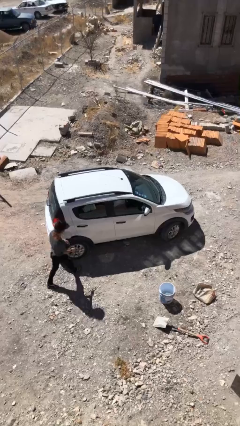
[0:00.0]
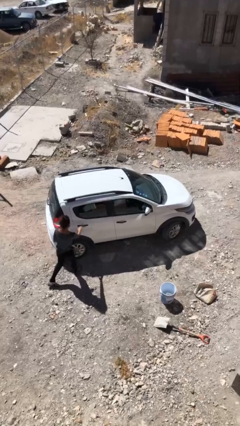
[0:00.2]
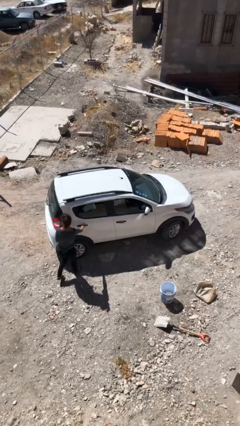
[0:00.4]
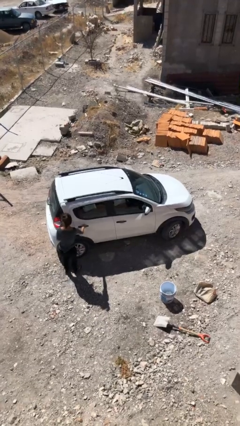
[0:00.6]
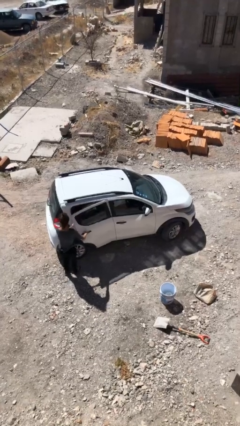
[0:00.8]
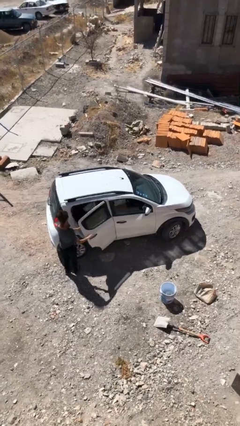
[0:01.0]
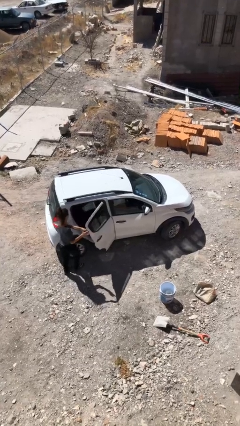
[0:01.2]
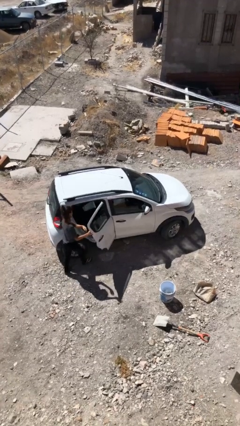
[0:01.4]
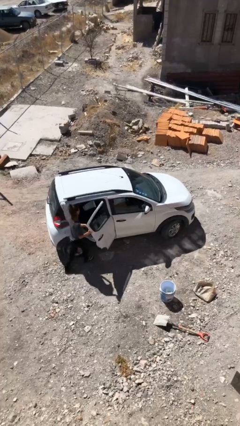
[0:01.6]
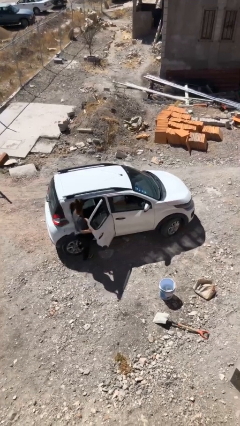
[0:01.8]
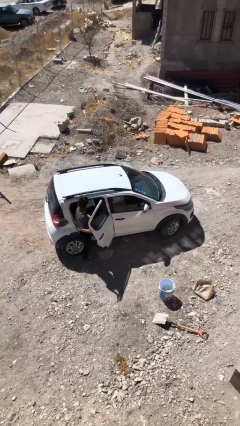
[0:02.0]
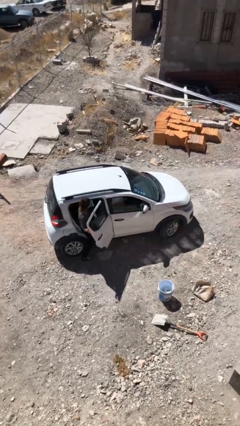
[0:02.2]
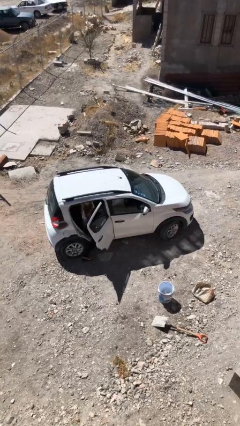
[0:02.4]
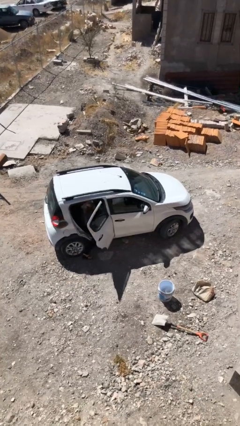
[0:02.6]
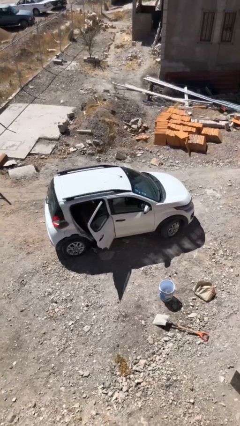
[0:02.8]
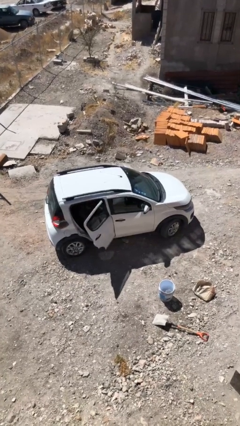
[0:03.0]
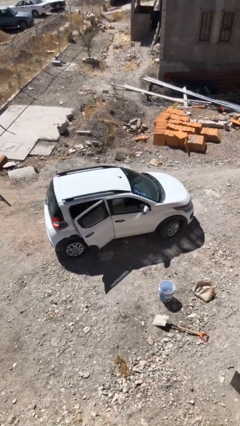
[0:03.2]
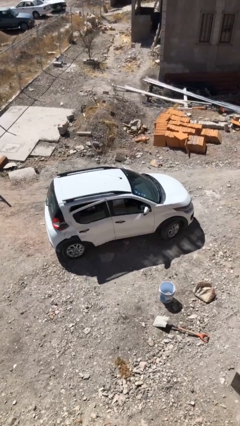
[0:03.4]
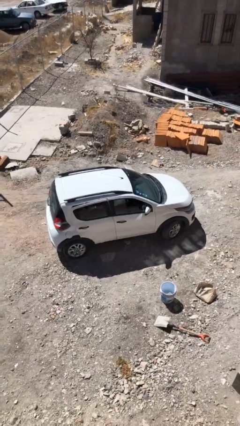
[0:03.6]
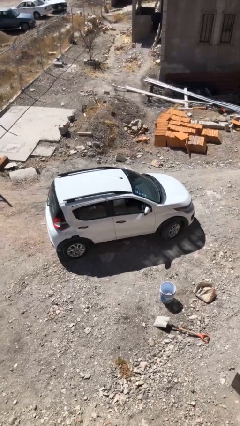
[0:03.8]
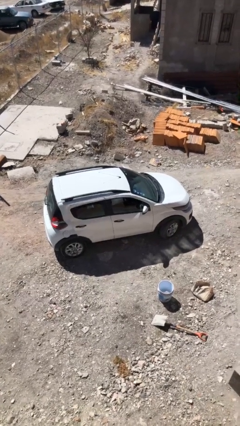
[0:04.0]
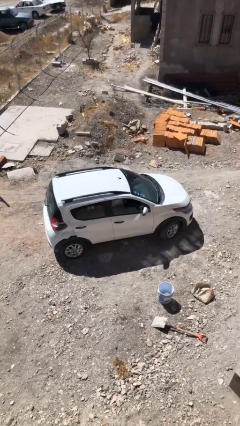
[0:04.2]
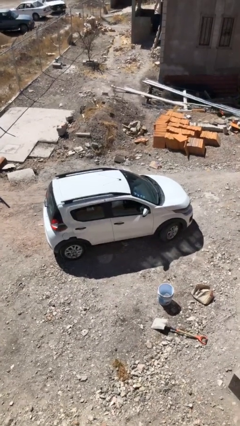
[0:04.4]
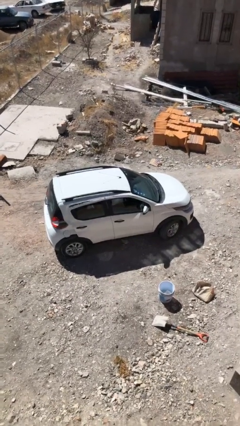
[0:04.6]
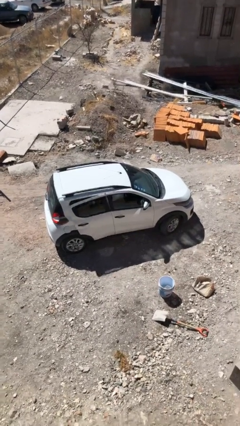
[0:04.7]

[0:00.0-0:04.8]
car picks up person

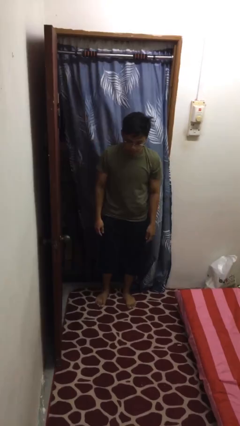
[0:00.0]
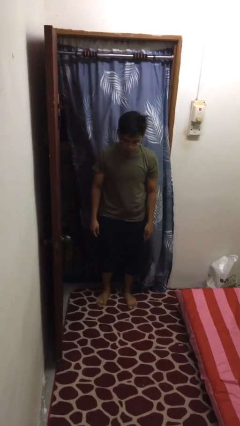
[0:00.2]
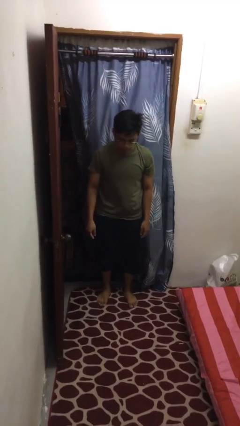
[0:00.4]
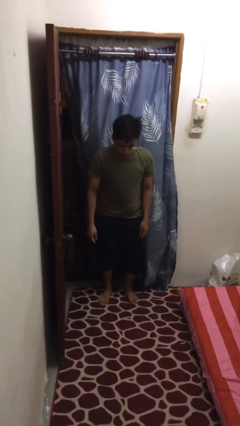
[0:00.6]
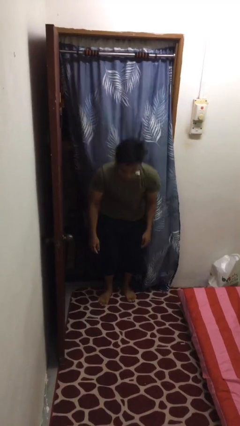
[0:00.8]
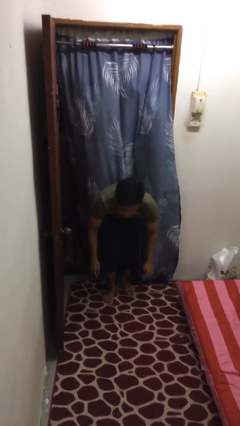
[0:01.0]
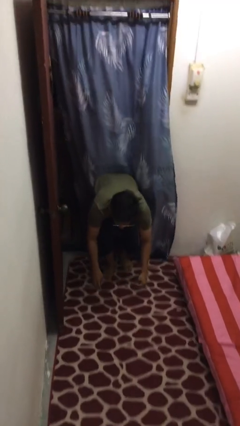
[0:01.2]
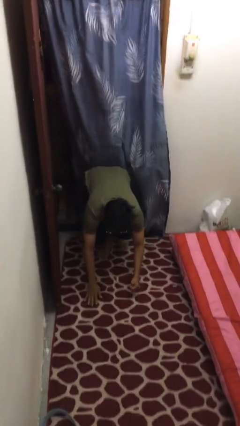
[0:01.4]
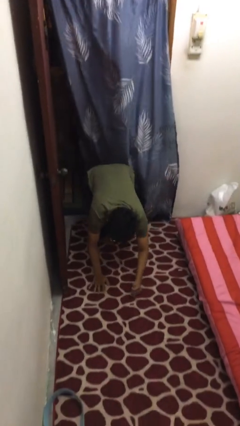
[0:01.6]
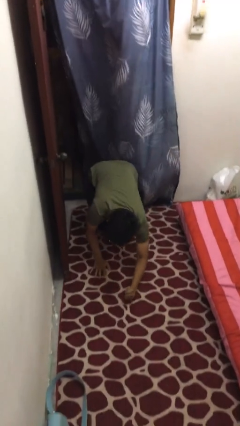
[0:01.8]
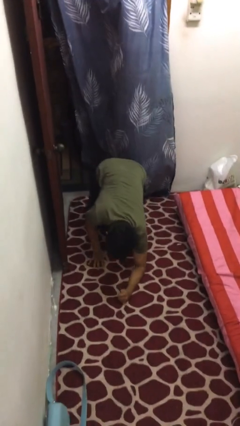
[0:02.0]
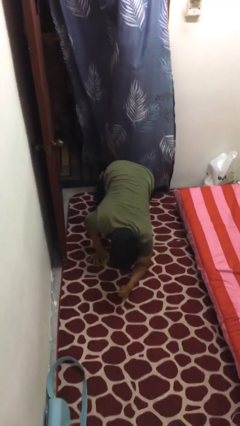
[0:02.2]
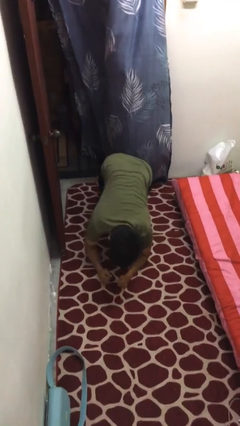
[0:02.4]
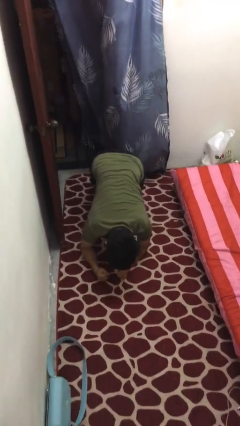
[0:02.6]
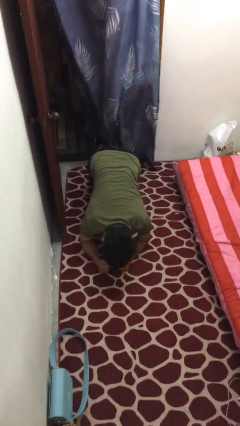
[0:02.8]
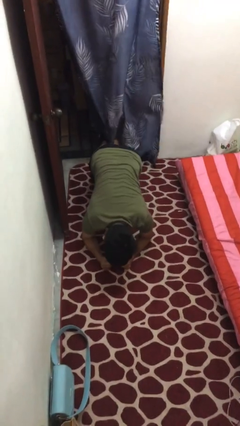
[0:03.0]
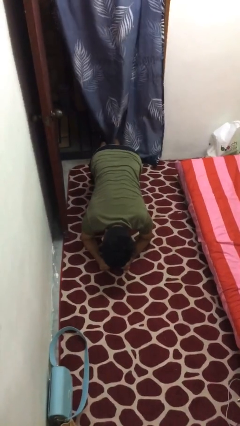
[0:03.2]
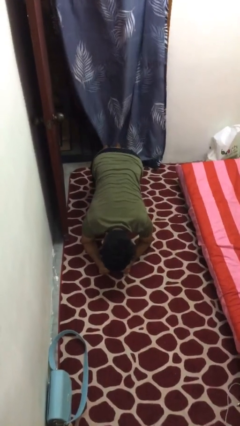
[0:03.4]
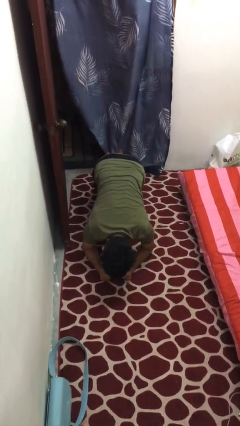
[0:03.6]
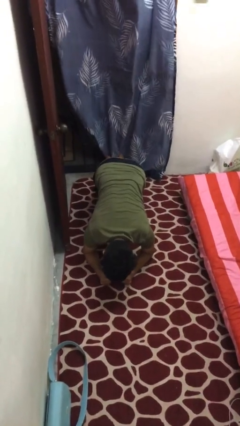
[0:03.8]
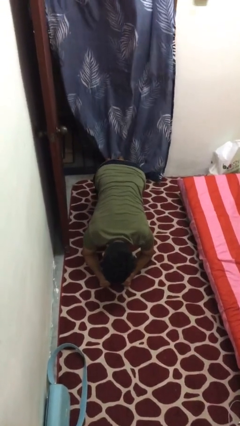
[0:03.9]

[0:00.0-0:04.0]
person exercises with plank

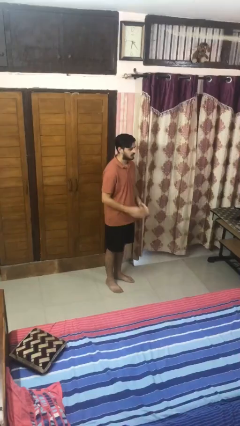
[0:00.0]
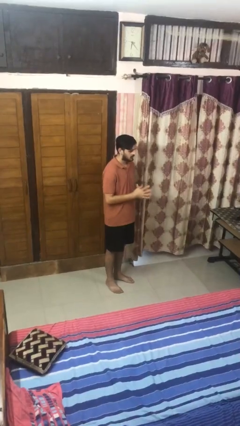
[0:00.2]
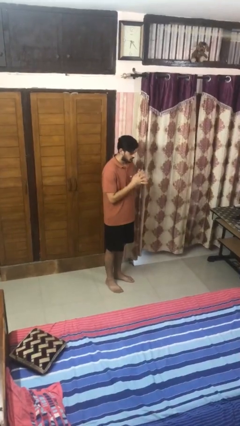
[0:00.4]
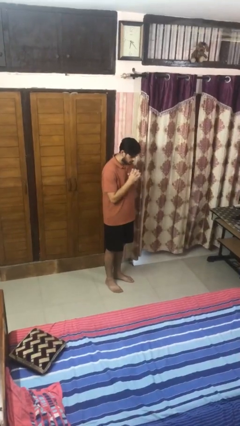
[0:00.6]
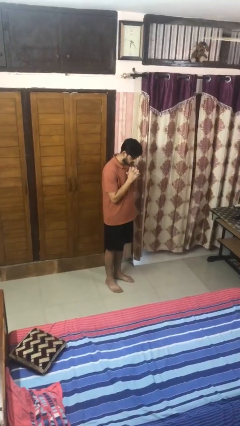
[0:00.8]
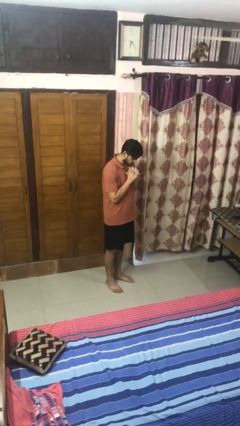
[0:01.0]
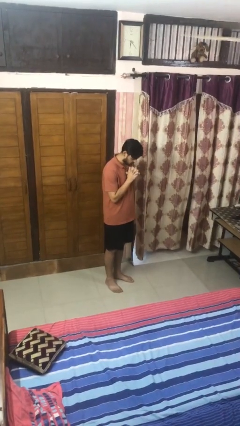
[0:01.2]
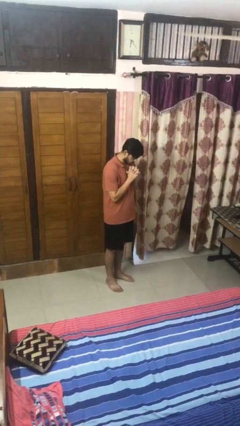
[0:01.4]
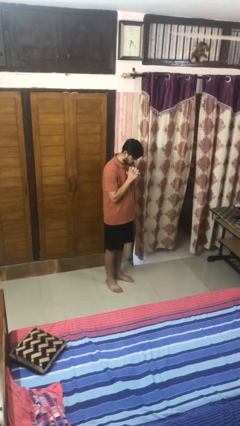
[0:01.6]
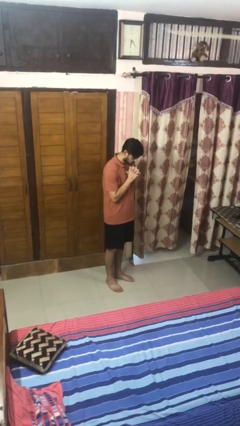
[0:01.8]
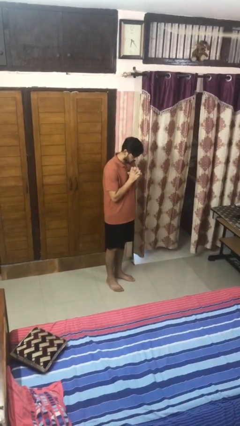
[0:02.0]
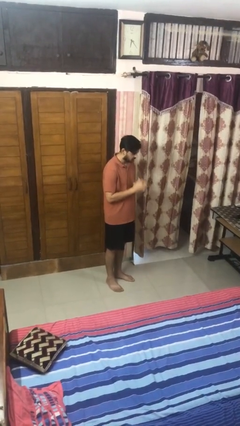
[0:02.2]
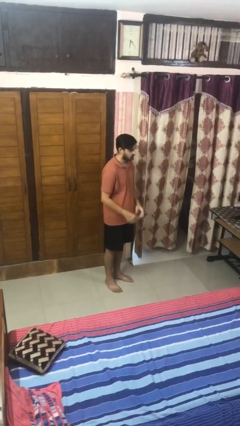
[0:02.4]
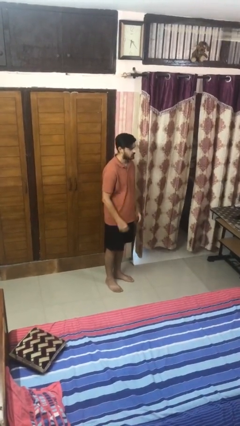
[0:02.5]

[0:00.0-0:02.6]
person prays

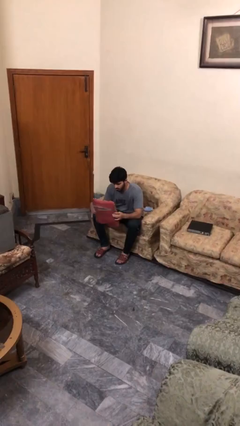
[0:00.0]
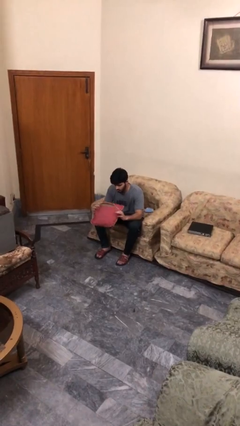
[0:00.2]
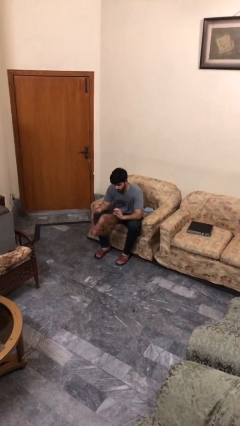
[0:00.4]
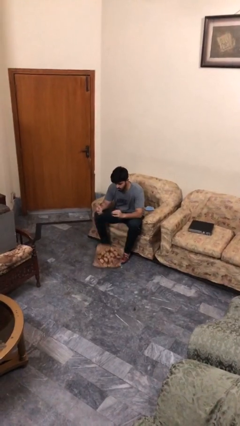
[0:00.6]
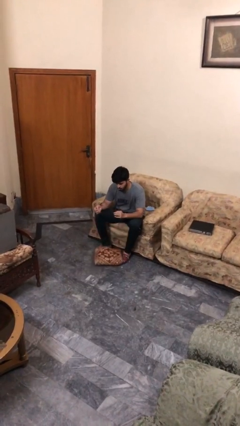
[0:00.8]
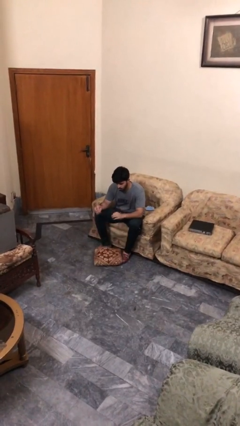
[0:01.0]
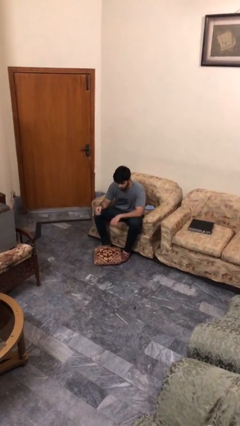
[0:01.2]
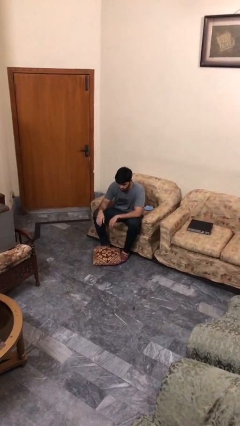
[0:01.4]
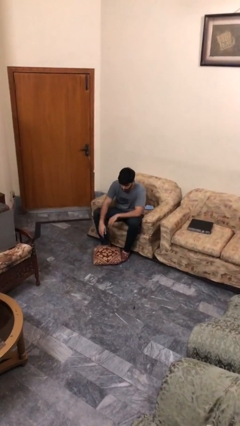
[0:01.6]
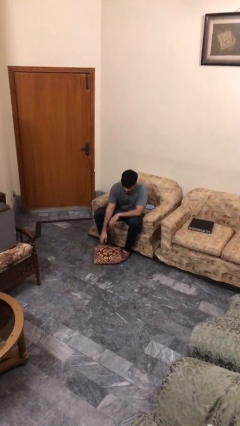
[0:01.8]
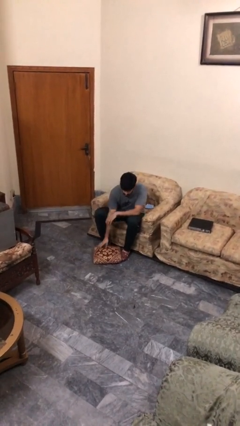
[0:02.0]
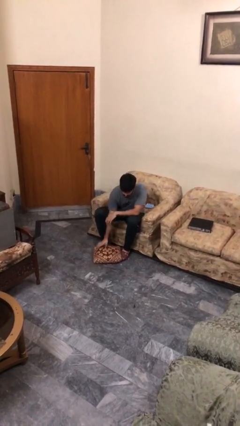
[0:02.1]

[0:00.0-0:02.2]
person drops object

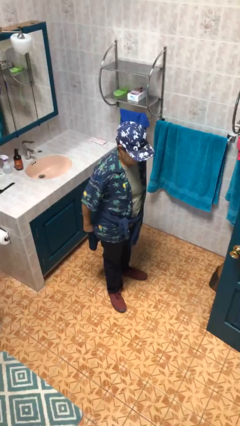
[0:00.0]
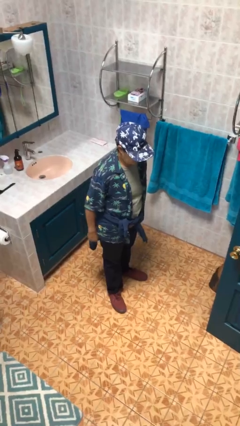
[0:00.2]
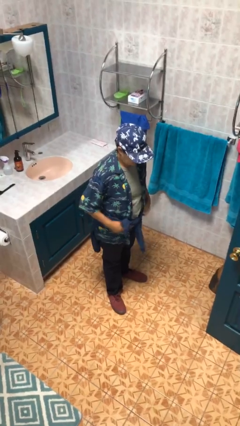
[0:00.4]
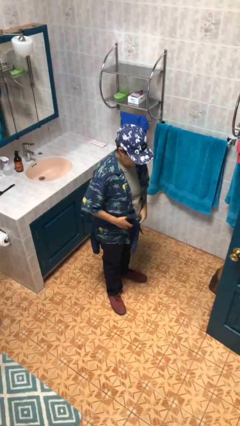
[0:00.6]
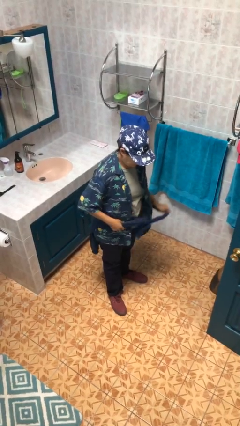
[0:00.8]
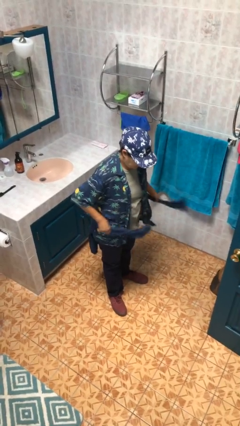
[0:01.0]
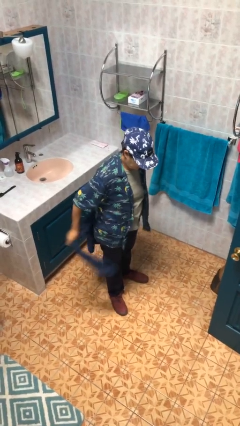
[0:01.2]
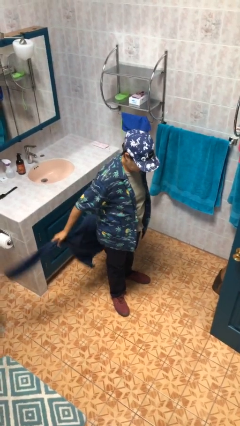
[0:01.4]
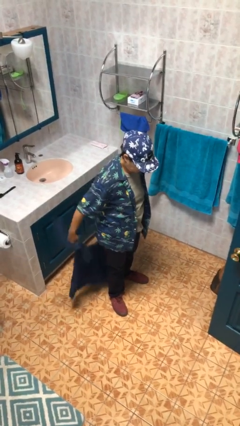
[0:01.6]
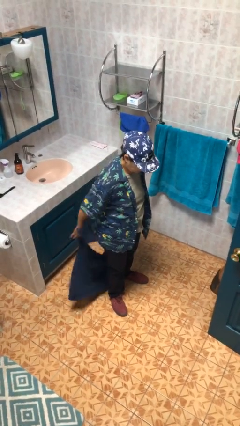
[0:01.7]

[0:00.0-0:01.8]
person unties jacket around waist

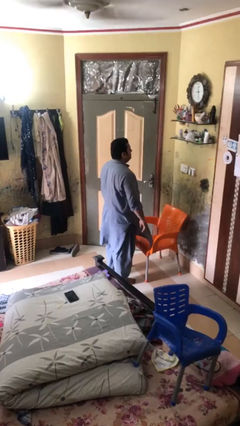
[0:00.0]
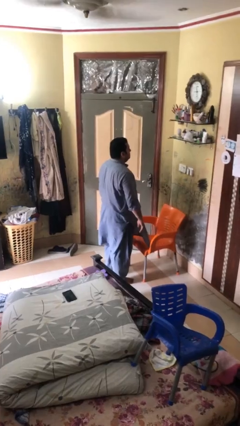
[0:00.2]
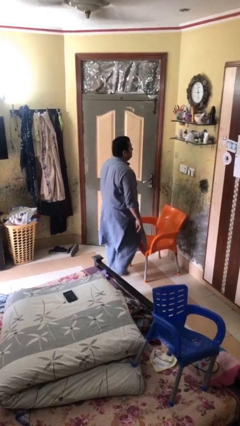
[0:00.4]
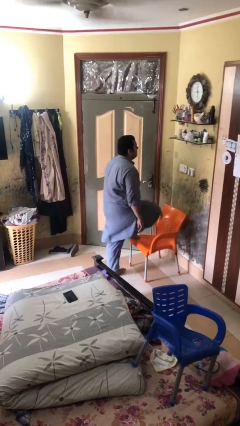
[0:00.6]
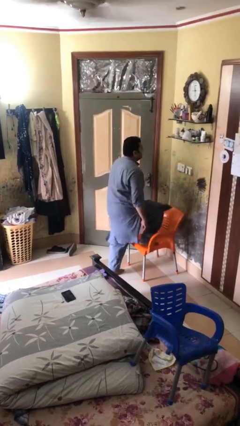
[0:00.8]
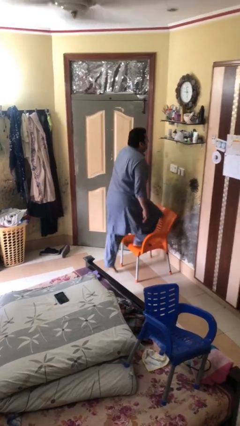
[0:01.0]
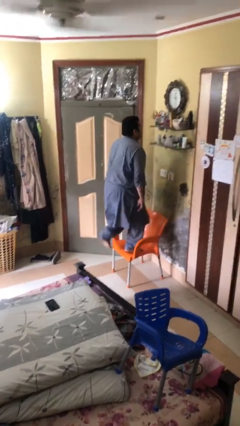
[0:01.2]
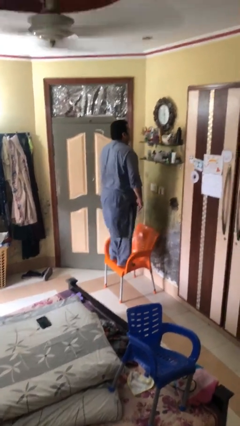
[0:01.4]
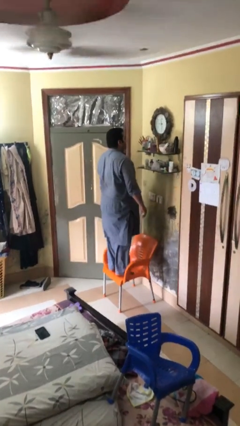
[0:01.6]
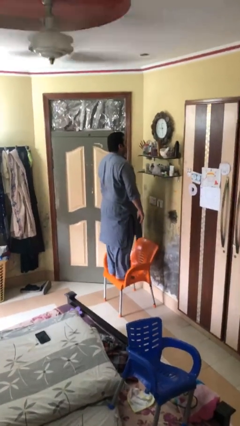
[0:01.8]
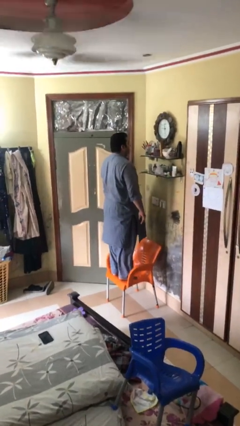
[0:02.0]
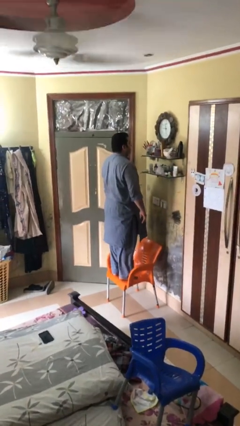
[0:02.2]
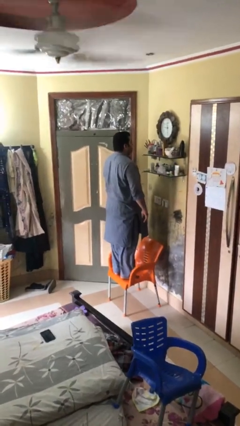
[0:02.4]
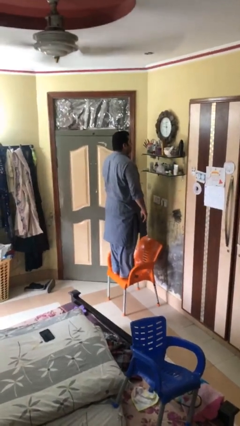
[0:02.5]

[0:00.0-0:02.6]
person climbs on chair
